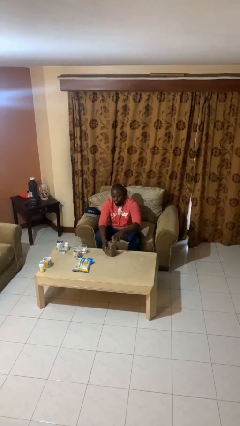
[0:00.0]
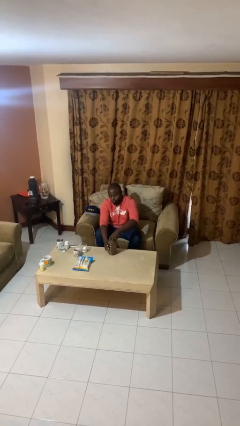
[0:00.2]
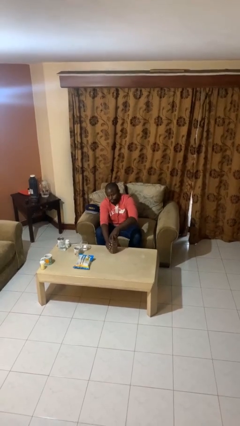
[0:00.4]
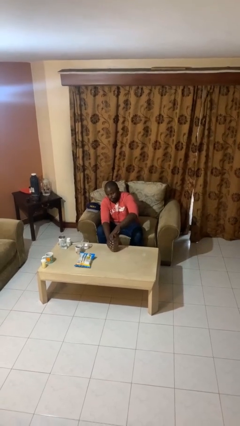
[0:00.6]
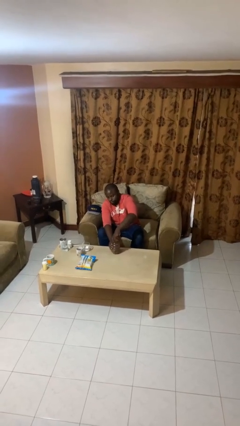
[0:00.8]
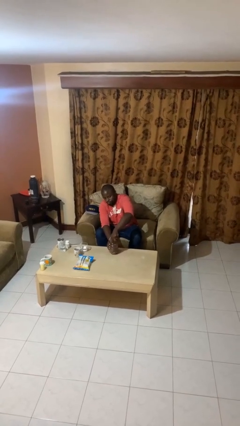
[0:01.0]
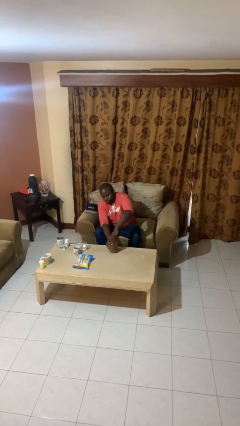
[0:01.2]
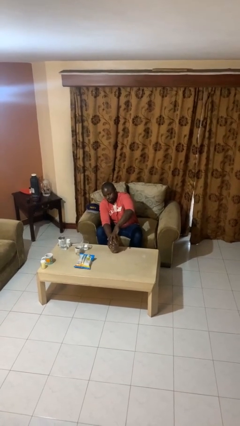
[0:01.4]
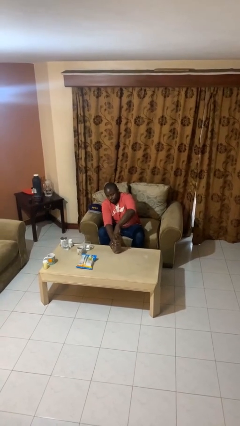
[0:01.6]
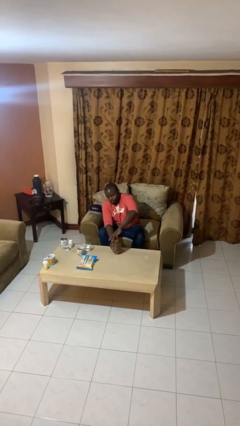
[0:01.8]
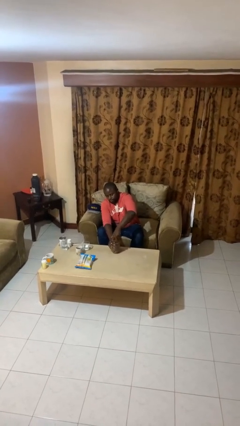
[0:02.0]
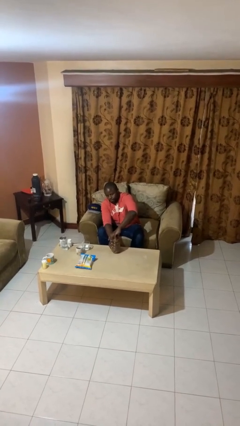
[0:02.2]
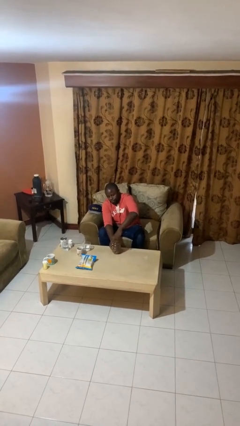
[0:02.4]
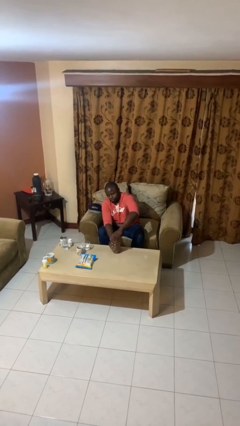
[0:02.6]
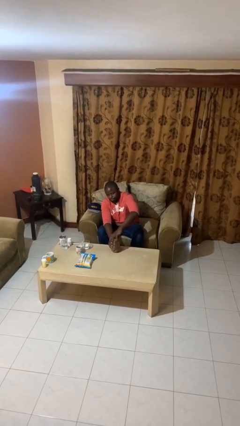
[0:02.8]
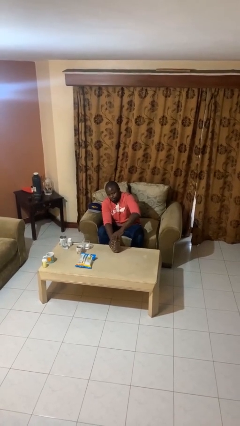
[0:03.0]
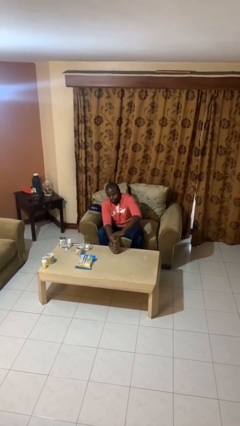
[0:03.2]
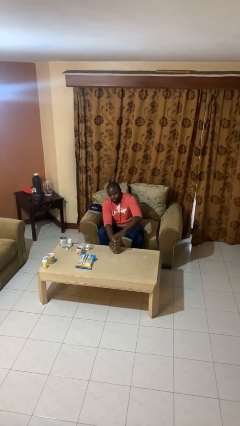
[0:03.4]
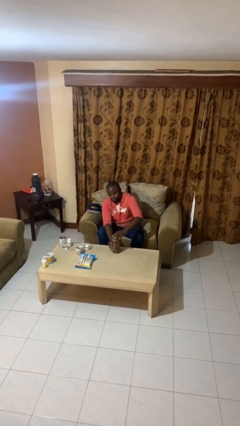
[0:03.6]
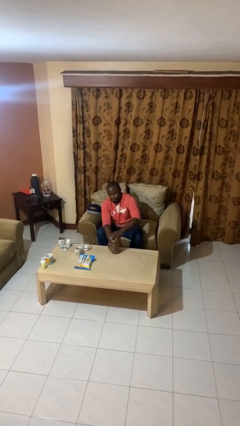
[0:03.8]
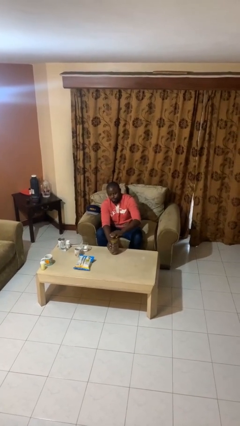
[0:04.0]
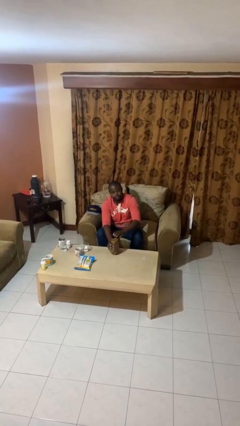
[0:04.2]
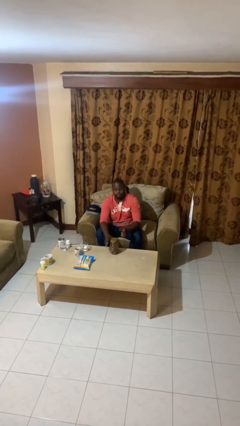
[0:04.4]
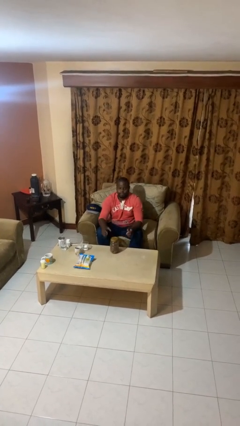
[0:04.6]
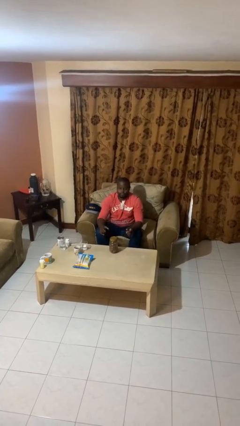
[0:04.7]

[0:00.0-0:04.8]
person closes jar

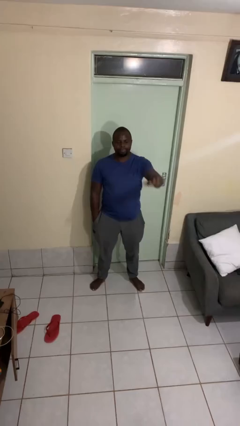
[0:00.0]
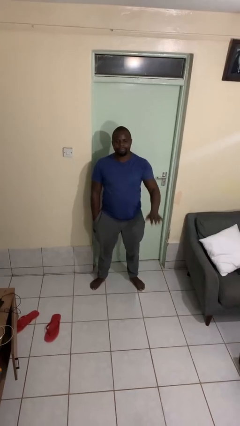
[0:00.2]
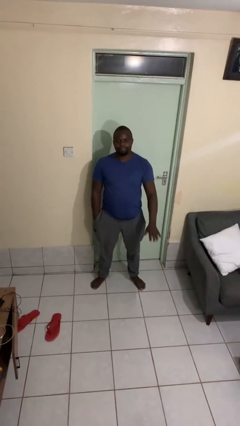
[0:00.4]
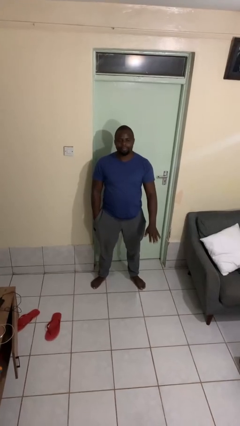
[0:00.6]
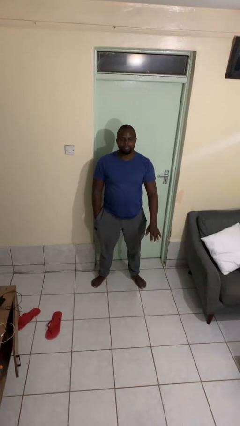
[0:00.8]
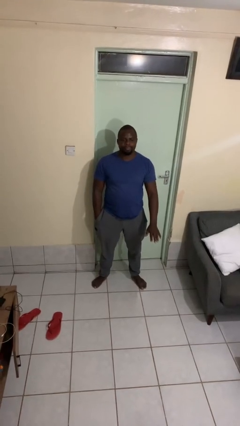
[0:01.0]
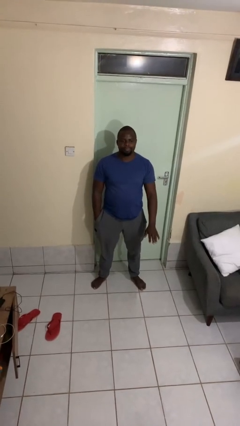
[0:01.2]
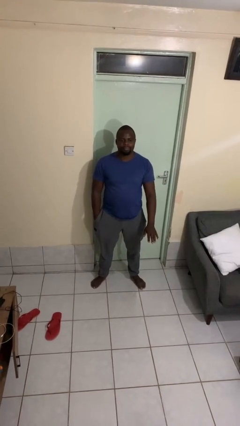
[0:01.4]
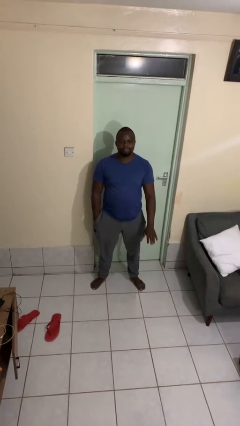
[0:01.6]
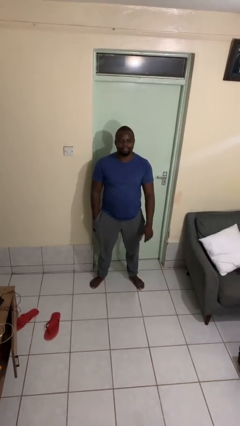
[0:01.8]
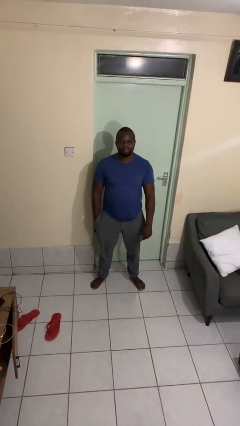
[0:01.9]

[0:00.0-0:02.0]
person gestures swipe down

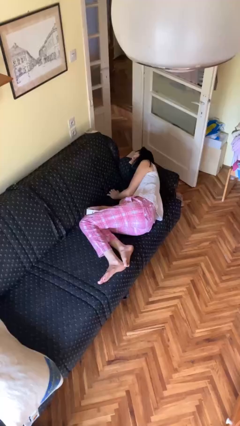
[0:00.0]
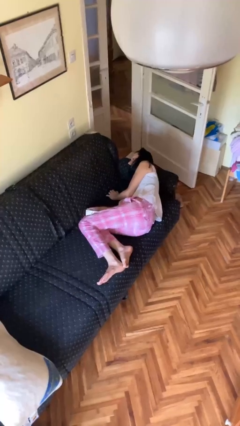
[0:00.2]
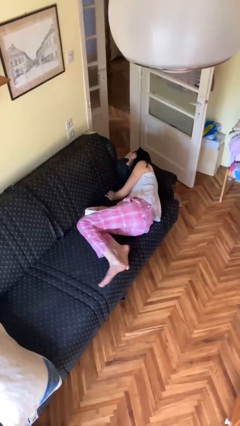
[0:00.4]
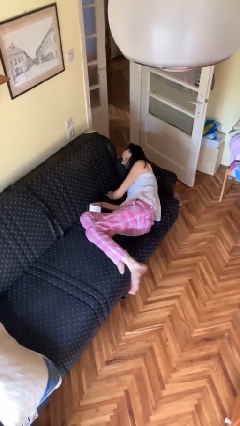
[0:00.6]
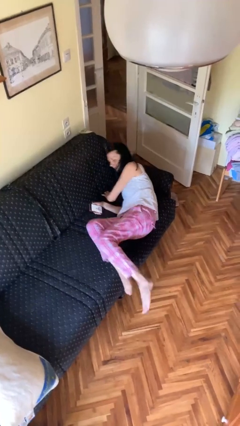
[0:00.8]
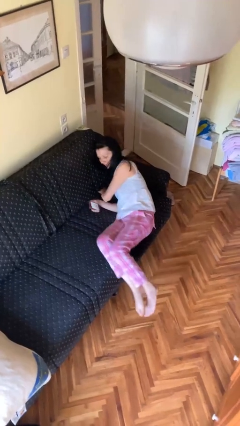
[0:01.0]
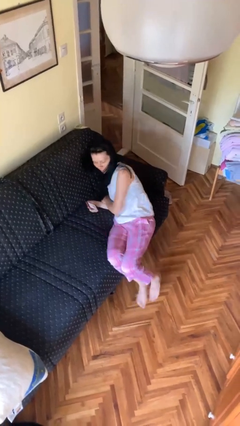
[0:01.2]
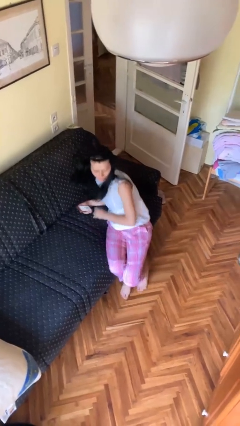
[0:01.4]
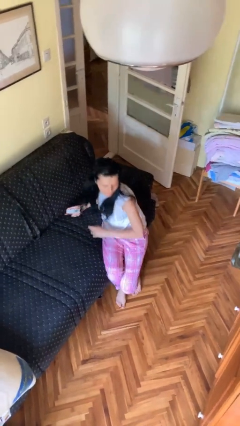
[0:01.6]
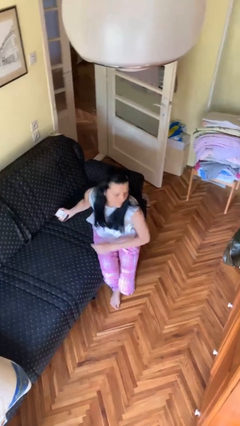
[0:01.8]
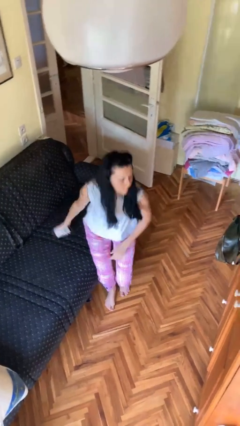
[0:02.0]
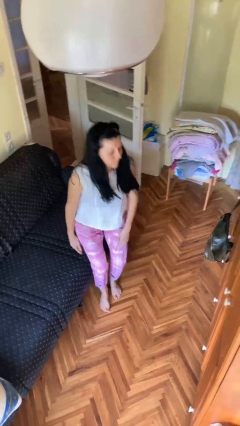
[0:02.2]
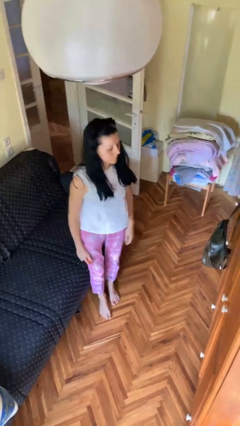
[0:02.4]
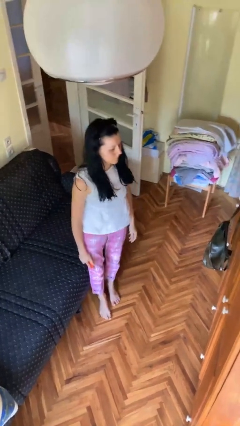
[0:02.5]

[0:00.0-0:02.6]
person stands up

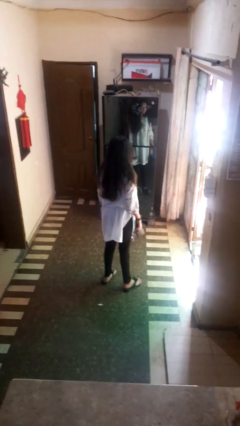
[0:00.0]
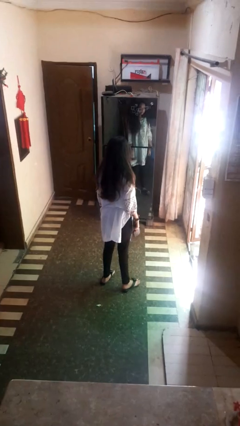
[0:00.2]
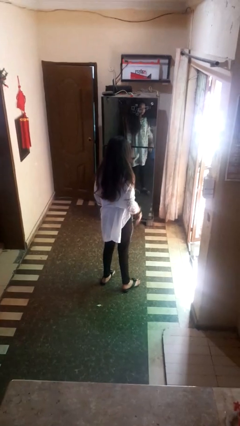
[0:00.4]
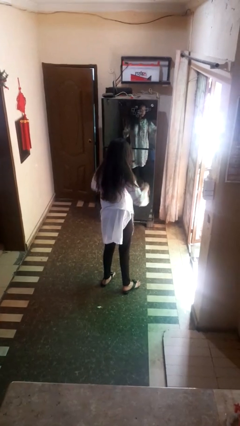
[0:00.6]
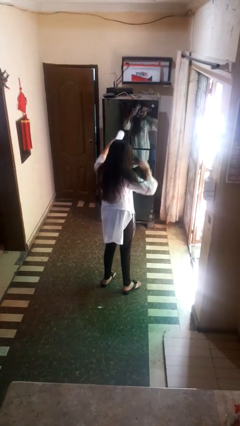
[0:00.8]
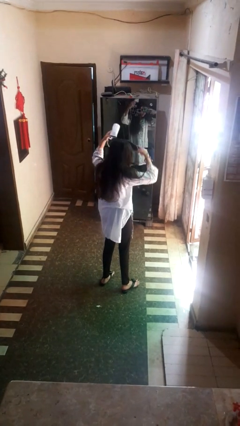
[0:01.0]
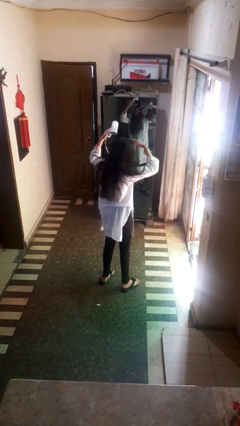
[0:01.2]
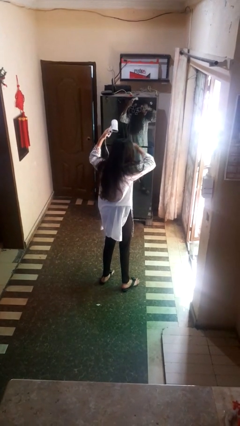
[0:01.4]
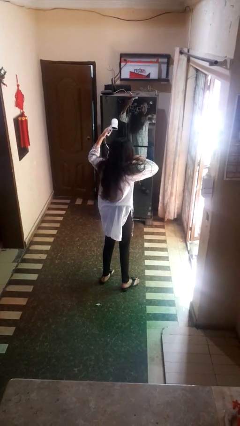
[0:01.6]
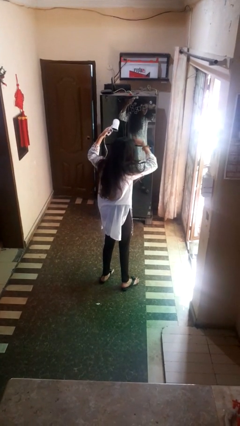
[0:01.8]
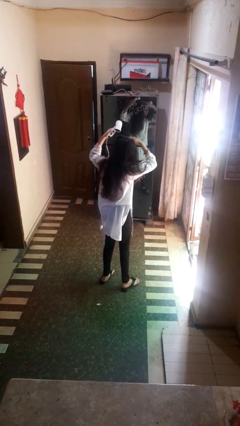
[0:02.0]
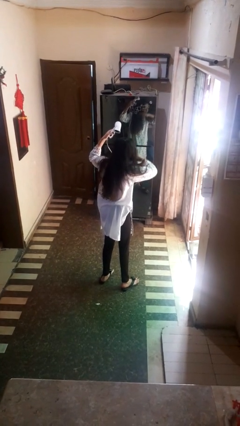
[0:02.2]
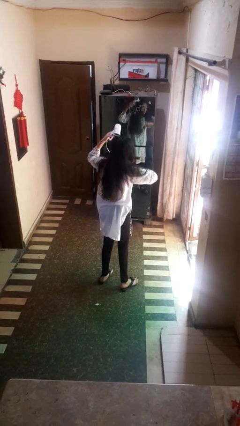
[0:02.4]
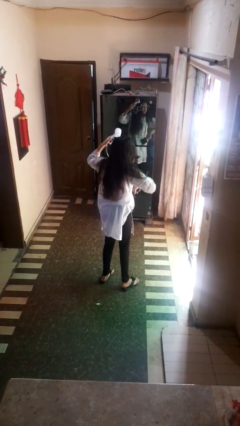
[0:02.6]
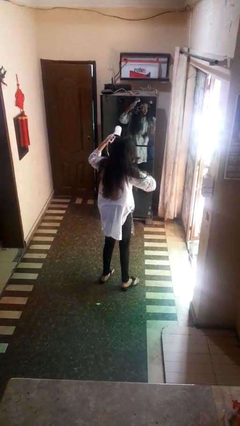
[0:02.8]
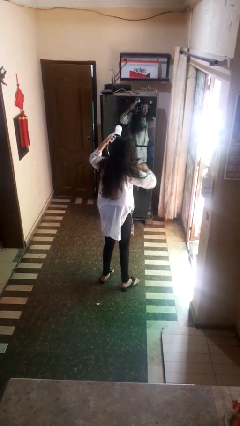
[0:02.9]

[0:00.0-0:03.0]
person dries hair with hairdryer

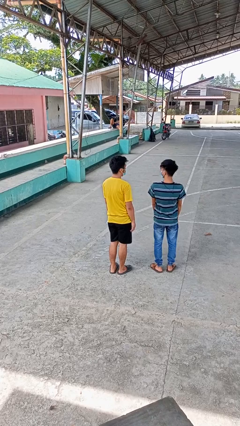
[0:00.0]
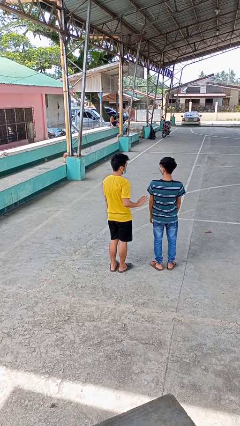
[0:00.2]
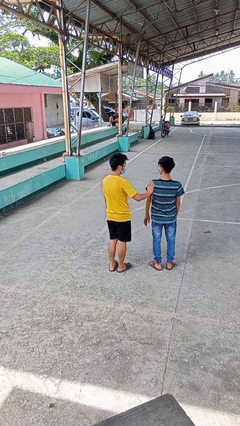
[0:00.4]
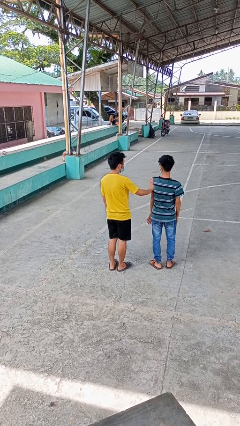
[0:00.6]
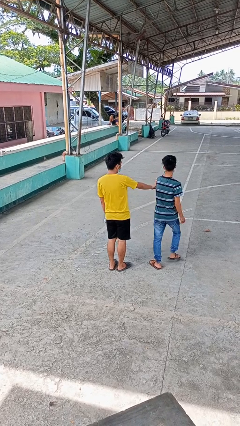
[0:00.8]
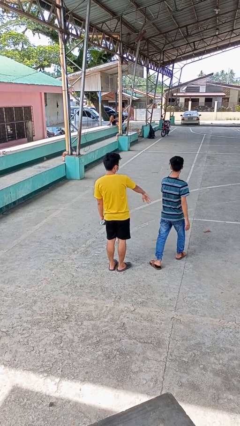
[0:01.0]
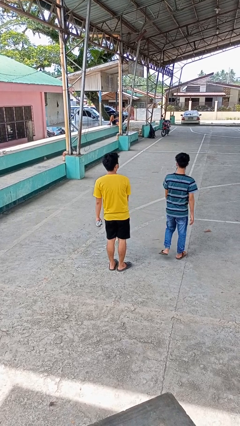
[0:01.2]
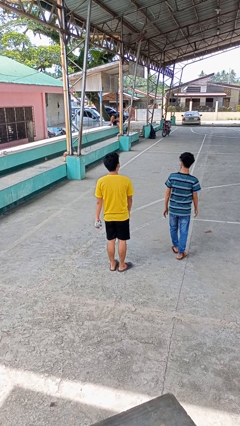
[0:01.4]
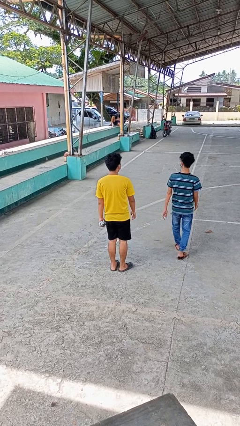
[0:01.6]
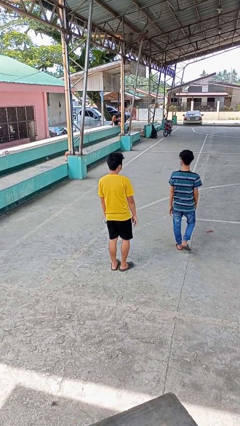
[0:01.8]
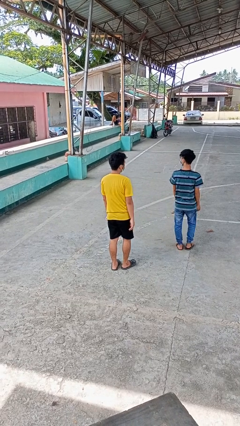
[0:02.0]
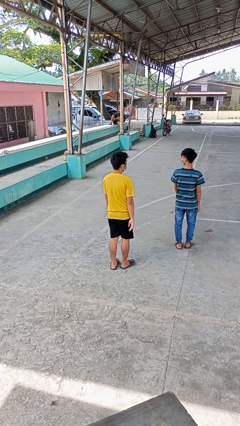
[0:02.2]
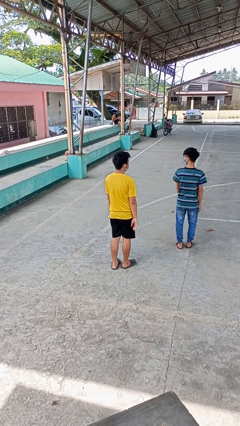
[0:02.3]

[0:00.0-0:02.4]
person shoves person

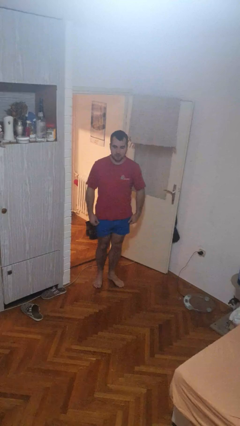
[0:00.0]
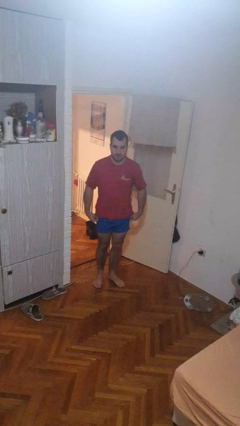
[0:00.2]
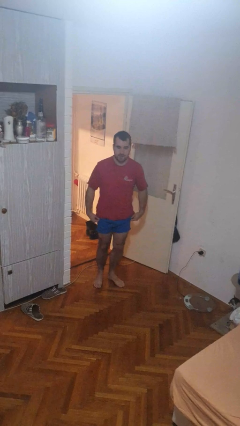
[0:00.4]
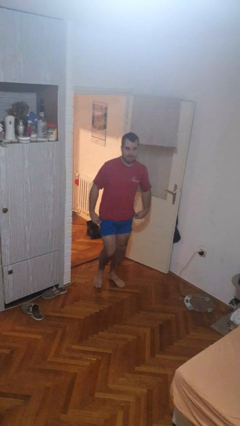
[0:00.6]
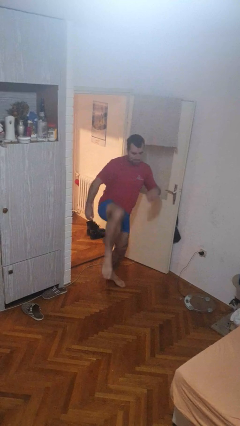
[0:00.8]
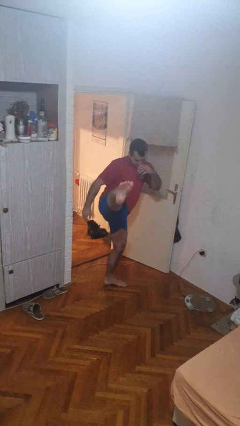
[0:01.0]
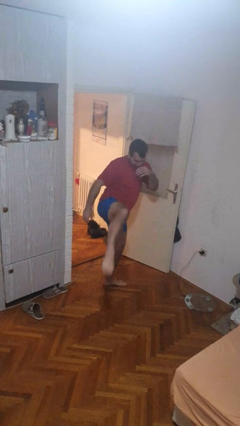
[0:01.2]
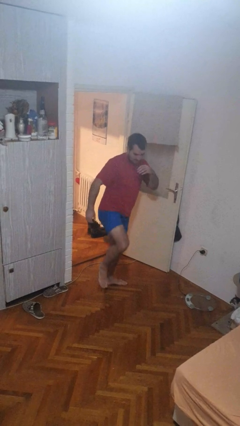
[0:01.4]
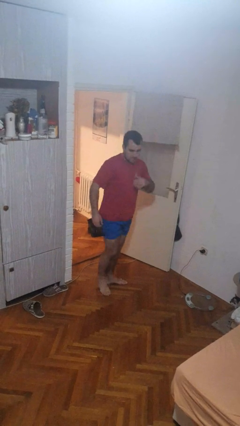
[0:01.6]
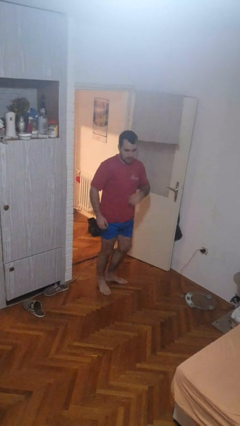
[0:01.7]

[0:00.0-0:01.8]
person karate kicks

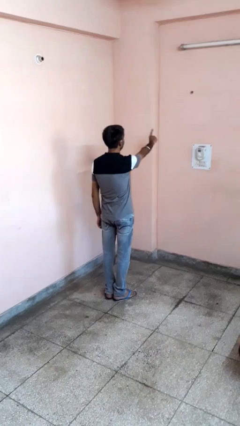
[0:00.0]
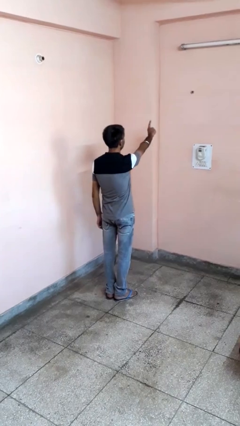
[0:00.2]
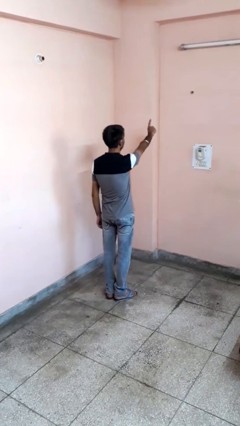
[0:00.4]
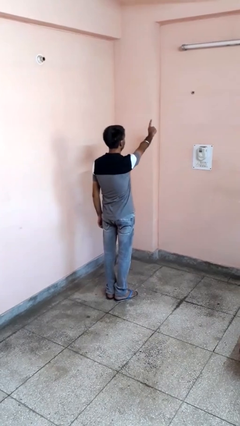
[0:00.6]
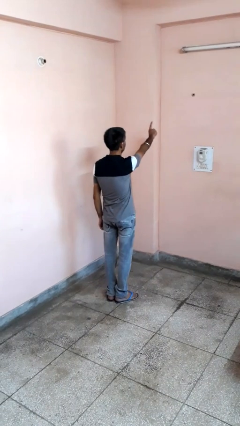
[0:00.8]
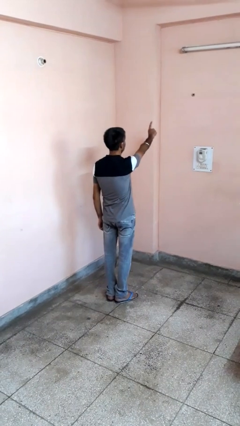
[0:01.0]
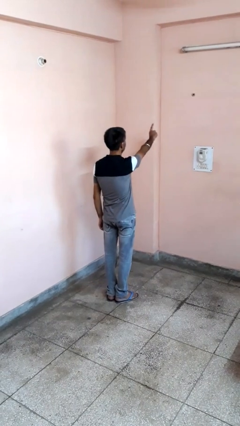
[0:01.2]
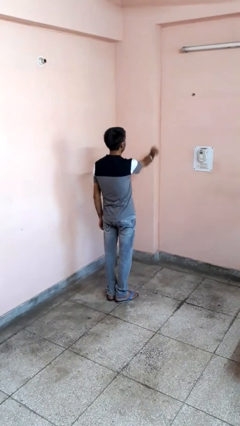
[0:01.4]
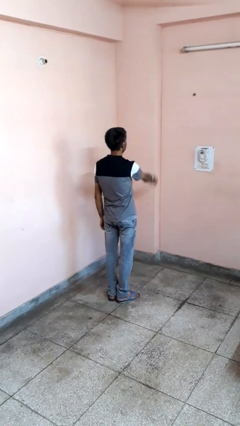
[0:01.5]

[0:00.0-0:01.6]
person gestures number one
